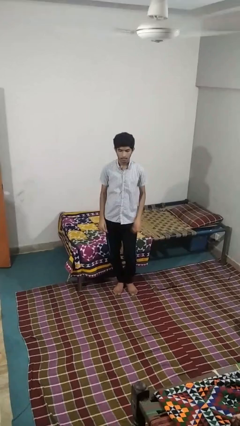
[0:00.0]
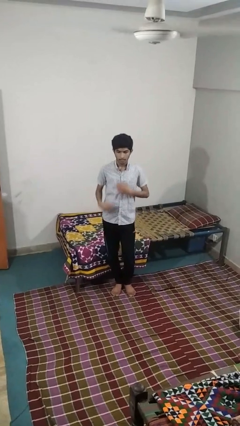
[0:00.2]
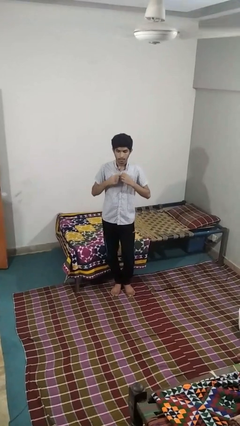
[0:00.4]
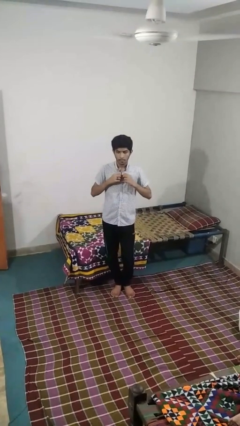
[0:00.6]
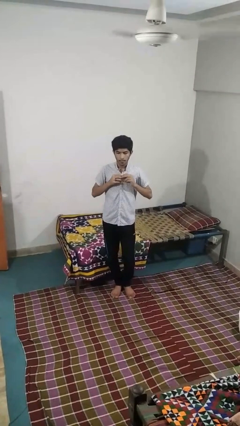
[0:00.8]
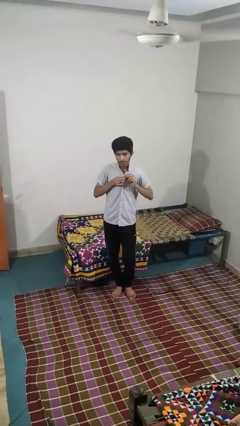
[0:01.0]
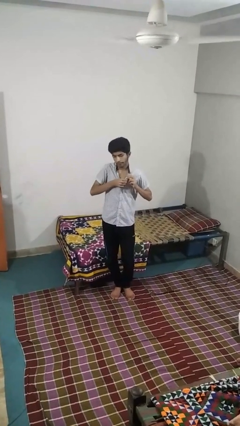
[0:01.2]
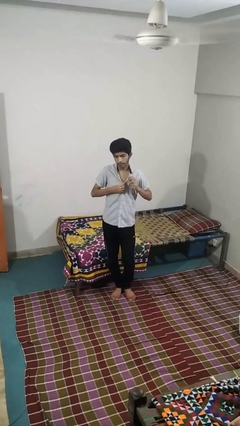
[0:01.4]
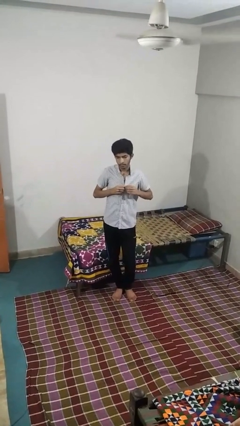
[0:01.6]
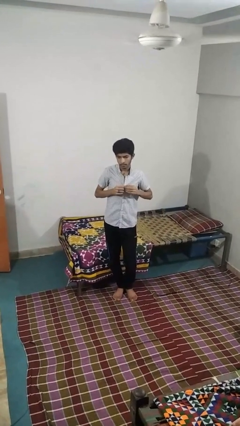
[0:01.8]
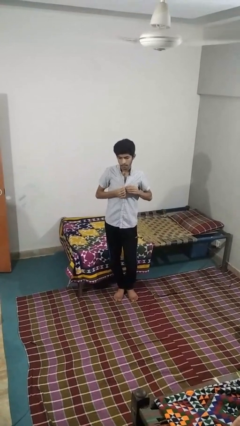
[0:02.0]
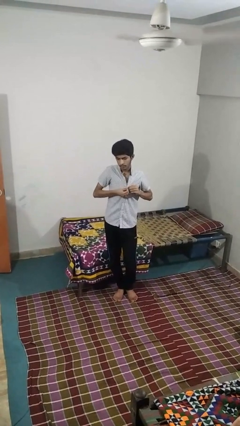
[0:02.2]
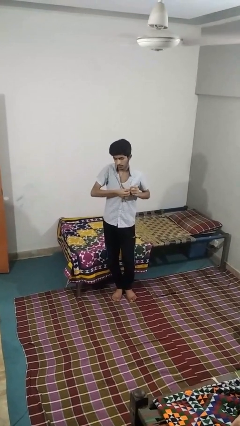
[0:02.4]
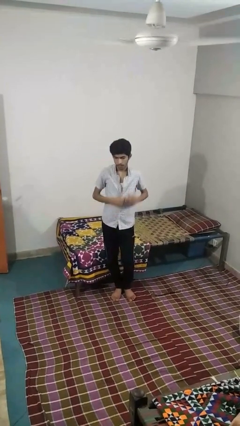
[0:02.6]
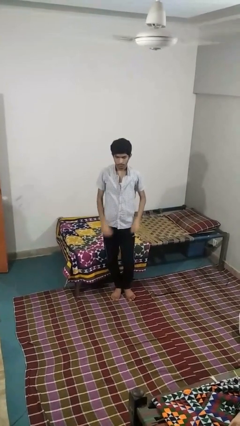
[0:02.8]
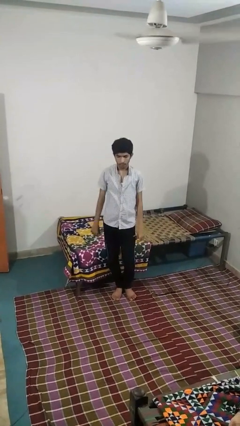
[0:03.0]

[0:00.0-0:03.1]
person unbuttons shirt

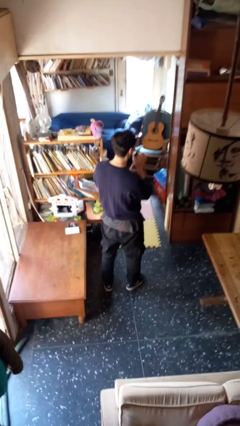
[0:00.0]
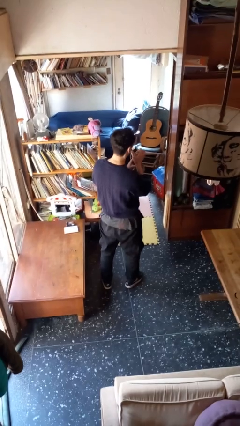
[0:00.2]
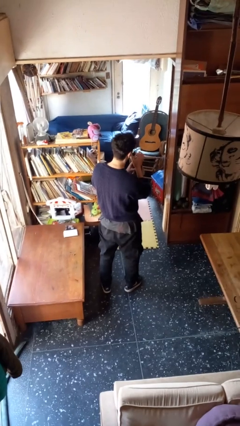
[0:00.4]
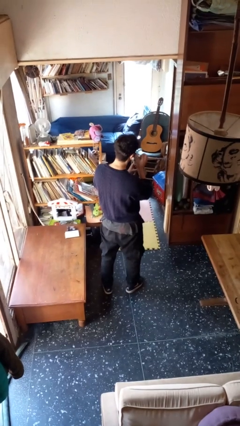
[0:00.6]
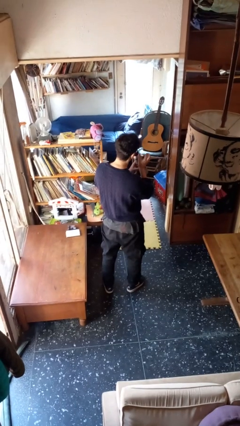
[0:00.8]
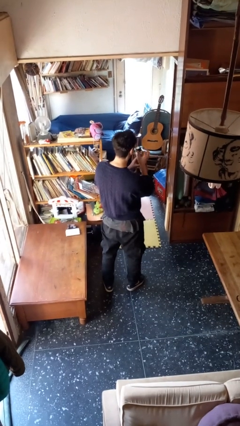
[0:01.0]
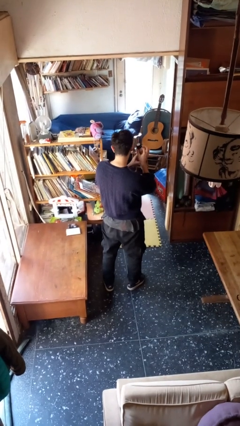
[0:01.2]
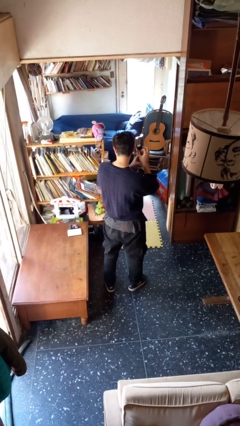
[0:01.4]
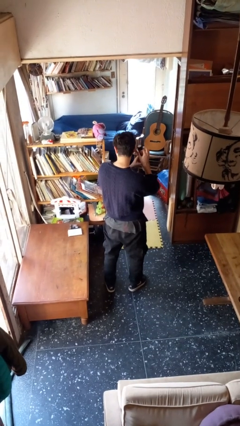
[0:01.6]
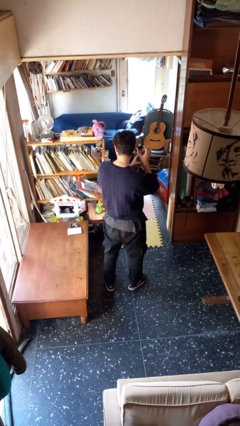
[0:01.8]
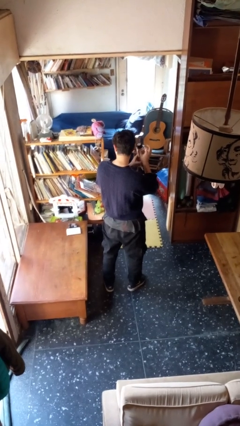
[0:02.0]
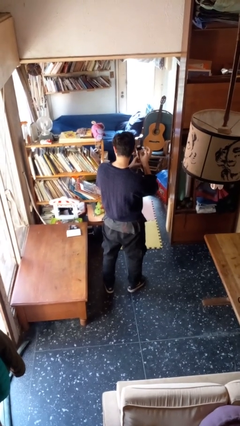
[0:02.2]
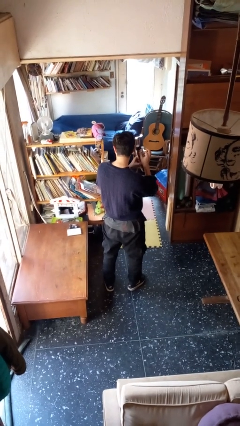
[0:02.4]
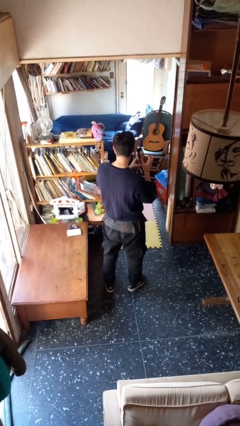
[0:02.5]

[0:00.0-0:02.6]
person taps object with finger

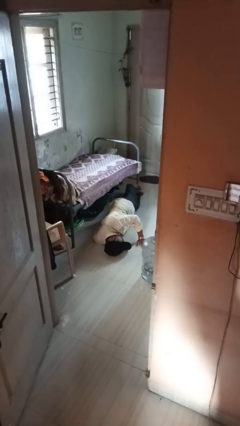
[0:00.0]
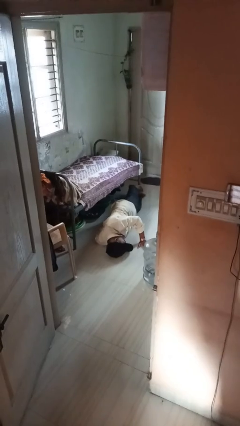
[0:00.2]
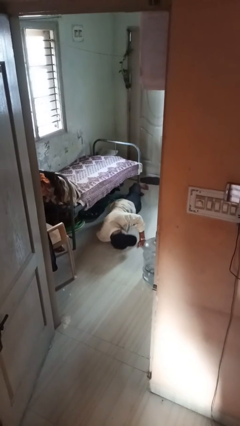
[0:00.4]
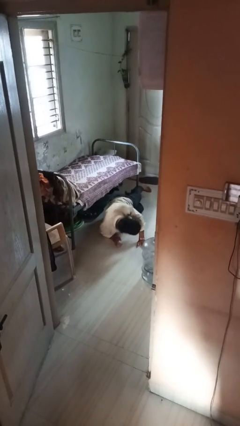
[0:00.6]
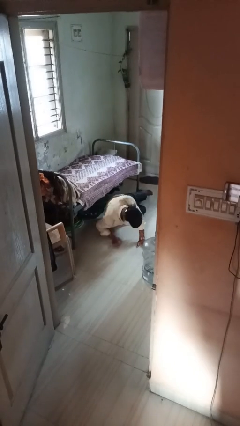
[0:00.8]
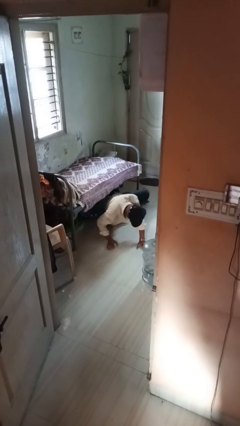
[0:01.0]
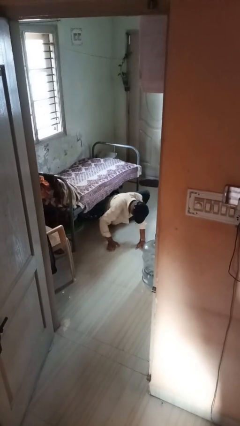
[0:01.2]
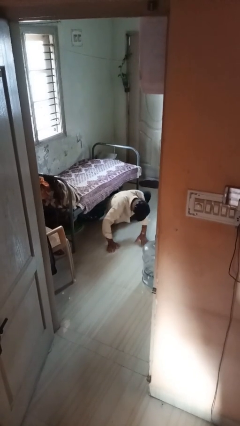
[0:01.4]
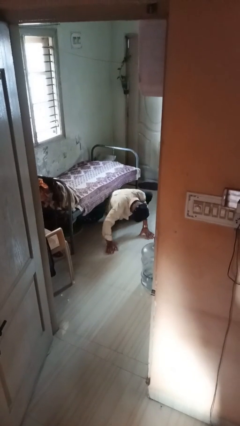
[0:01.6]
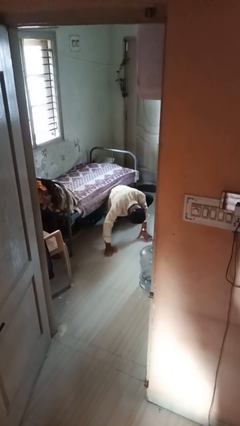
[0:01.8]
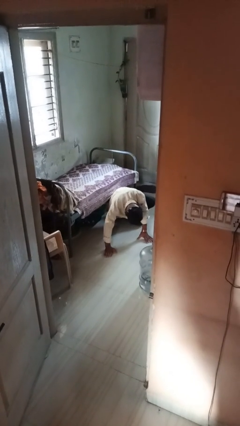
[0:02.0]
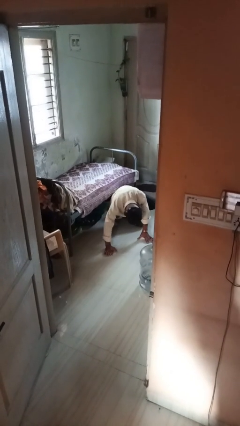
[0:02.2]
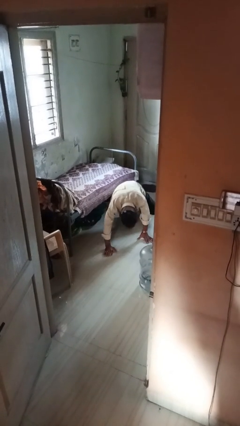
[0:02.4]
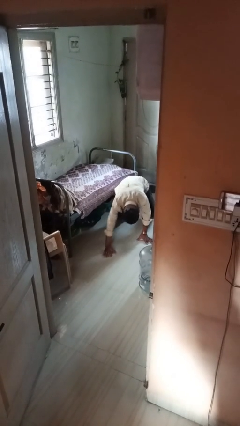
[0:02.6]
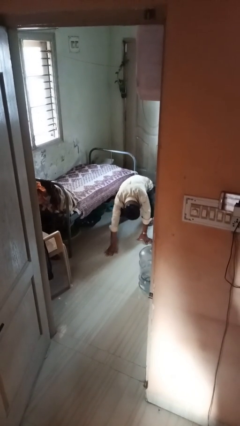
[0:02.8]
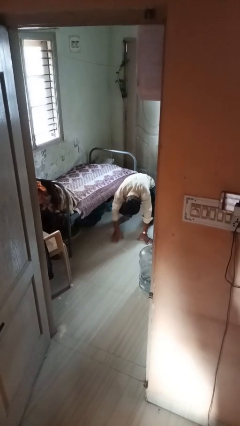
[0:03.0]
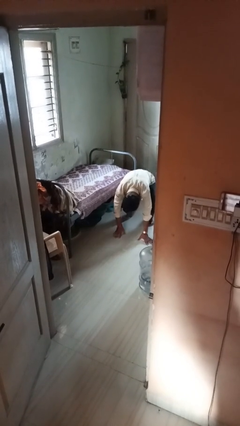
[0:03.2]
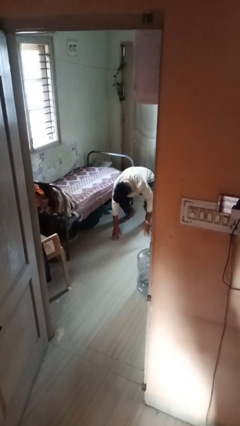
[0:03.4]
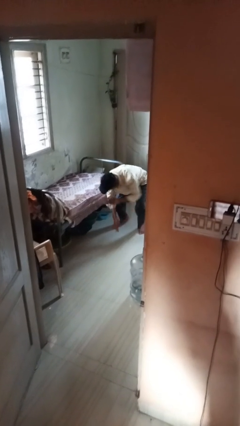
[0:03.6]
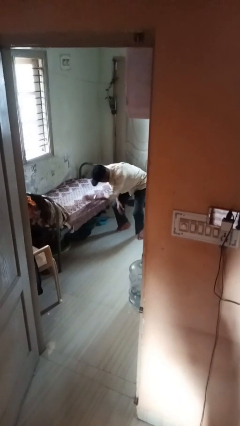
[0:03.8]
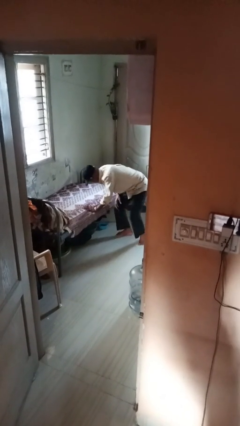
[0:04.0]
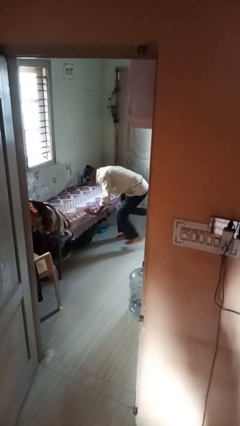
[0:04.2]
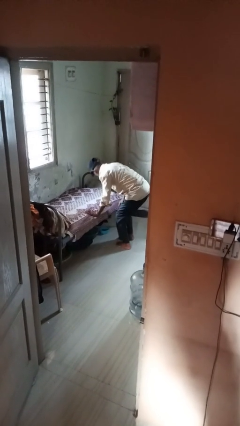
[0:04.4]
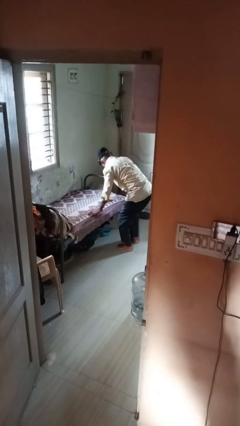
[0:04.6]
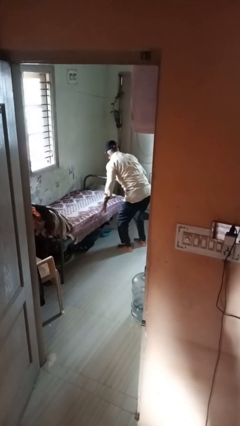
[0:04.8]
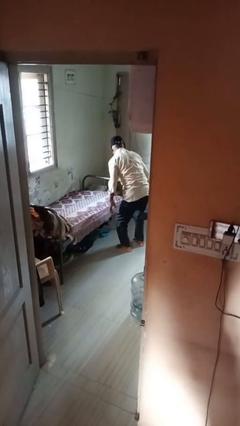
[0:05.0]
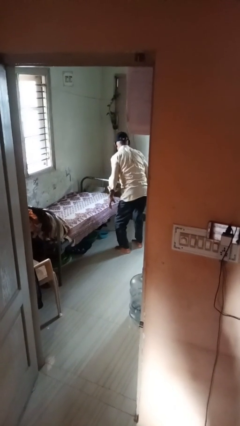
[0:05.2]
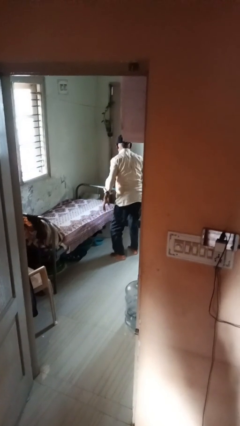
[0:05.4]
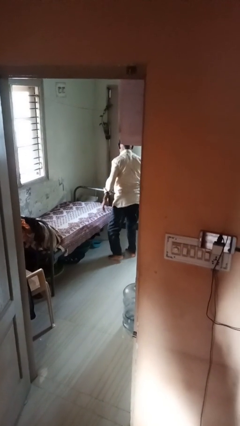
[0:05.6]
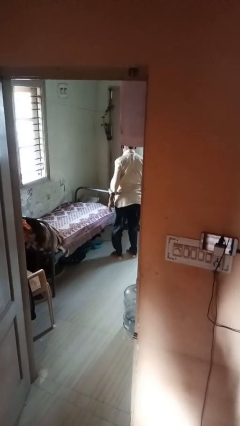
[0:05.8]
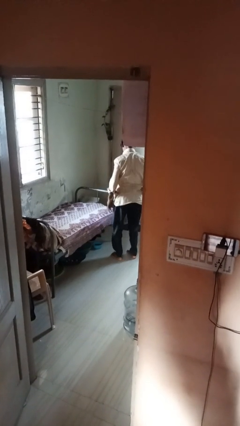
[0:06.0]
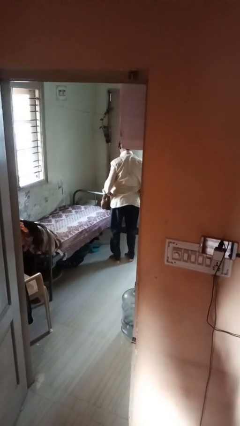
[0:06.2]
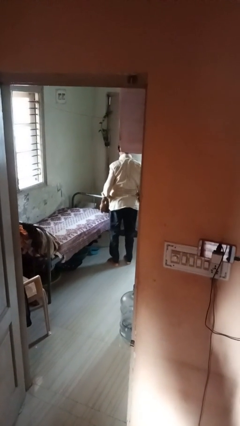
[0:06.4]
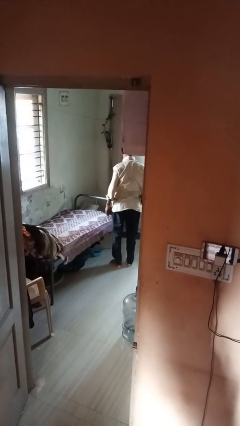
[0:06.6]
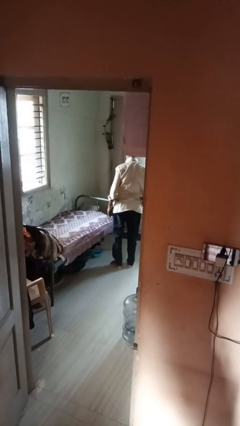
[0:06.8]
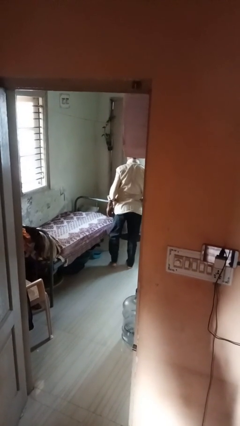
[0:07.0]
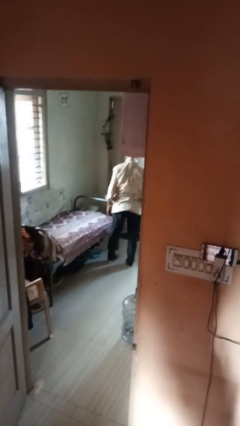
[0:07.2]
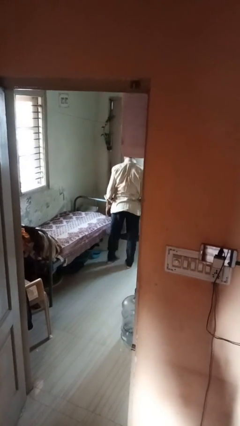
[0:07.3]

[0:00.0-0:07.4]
person stands up from floor

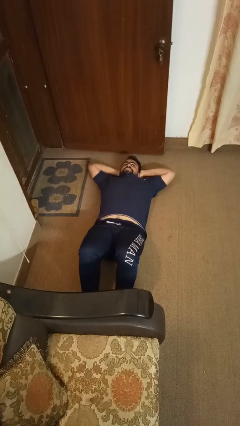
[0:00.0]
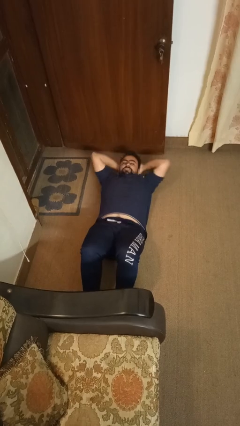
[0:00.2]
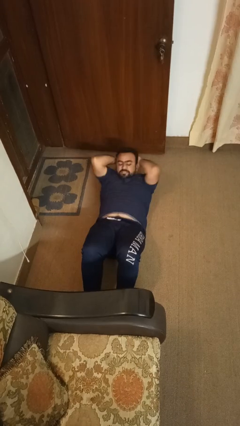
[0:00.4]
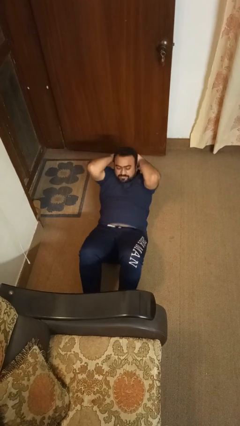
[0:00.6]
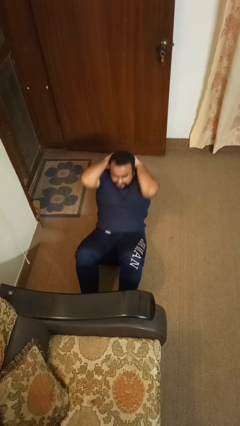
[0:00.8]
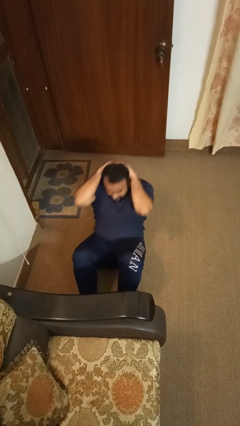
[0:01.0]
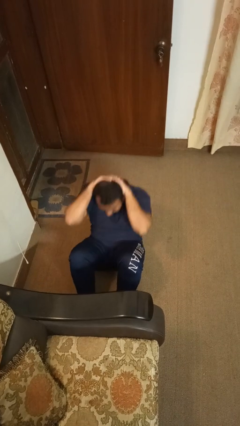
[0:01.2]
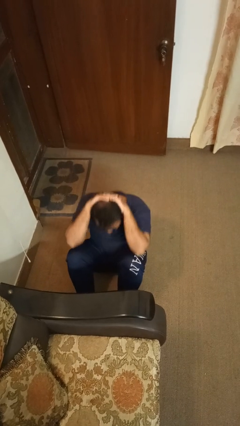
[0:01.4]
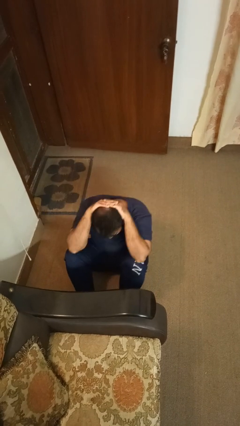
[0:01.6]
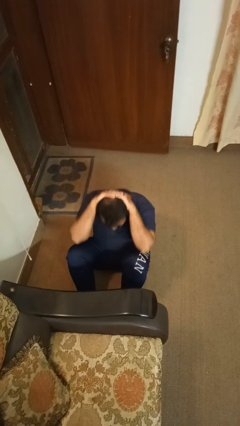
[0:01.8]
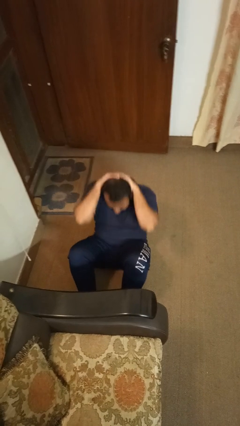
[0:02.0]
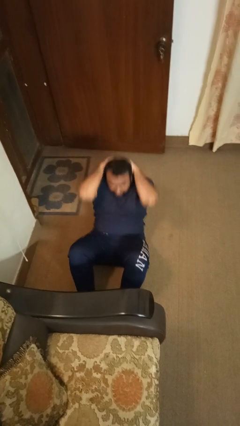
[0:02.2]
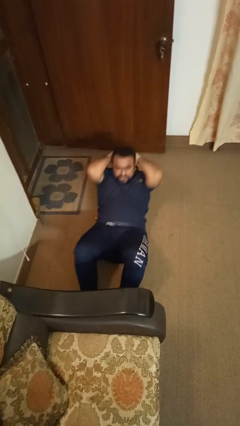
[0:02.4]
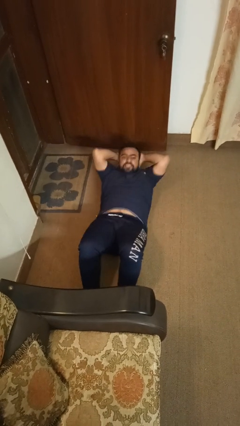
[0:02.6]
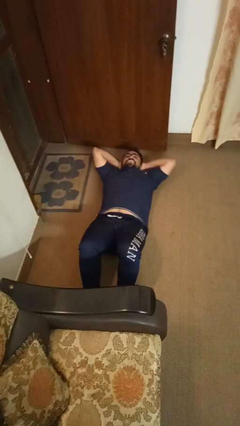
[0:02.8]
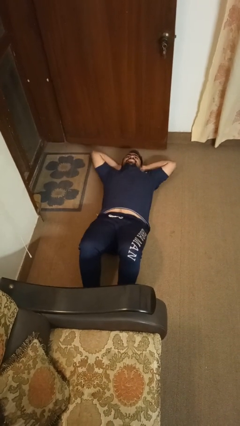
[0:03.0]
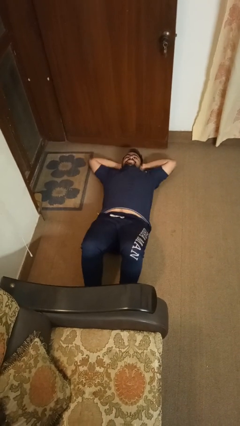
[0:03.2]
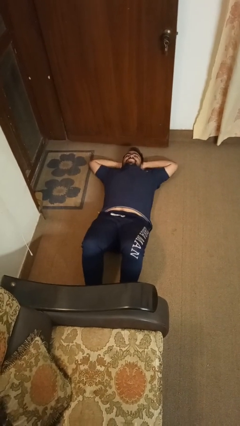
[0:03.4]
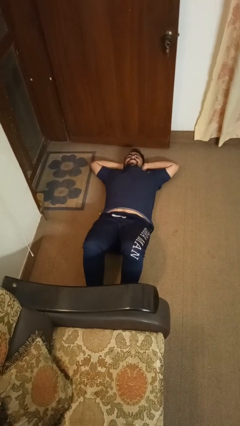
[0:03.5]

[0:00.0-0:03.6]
person exercises with situp

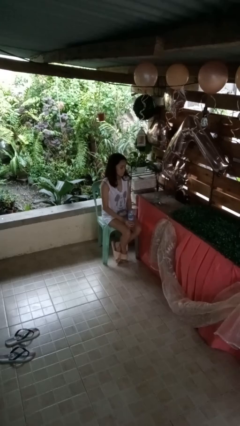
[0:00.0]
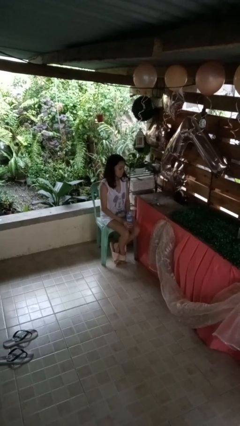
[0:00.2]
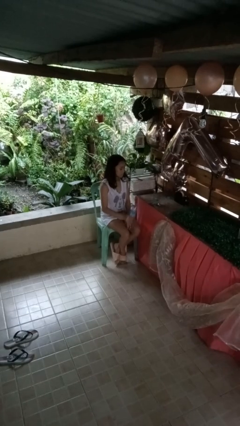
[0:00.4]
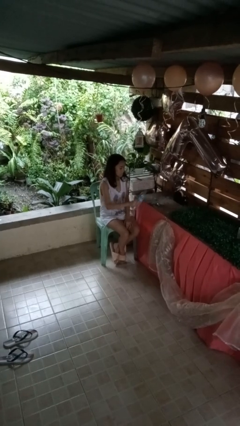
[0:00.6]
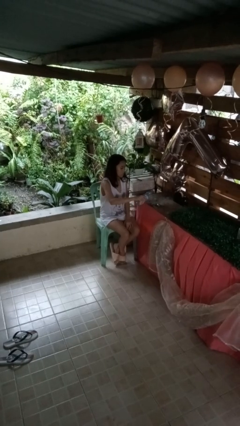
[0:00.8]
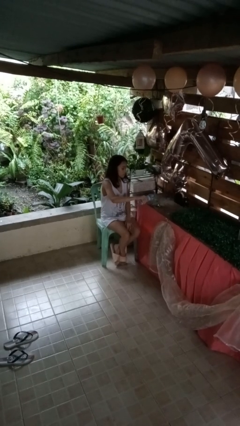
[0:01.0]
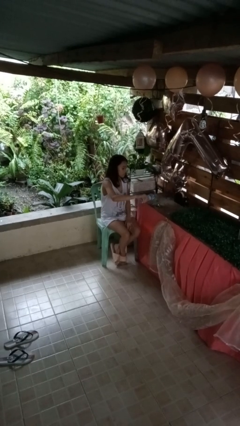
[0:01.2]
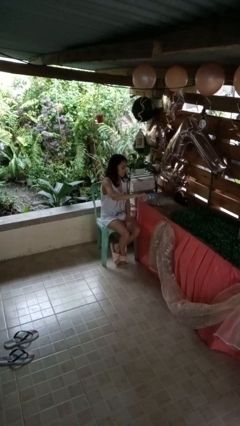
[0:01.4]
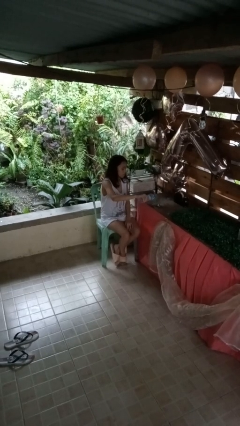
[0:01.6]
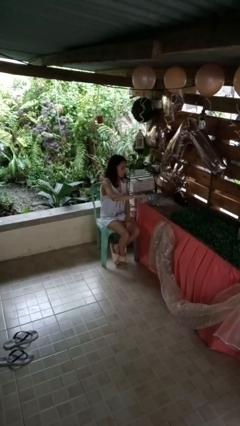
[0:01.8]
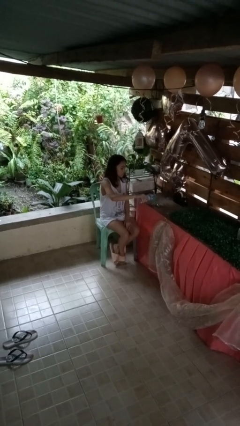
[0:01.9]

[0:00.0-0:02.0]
person pours liquid into cup
